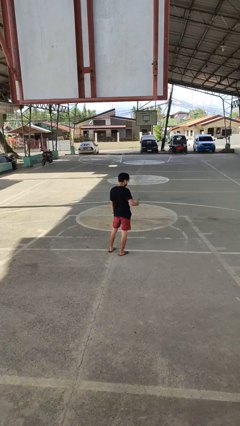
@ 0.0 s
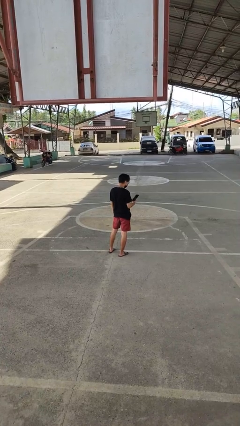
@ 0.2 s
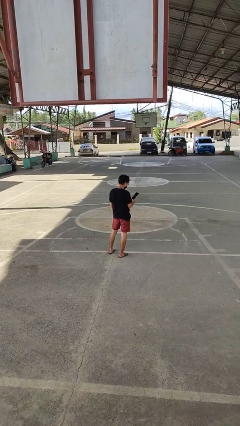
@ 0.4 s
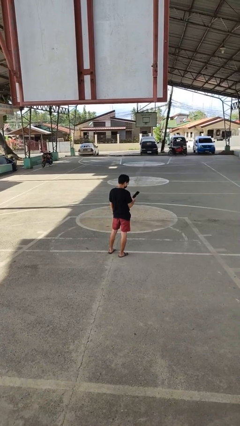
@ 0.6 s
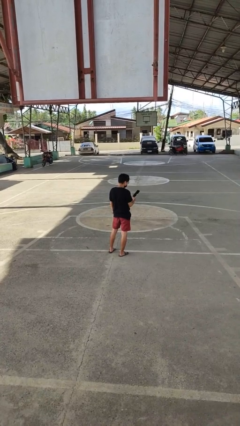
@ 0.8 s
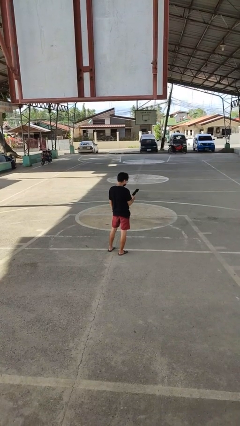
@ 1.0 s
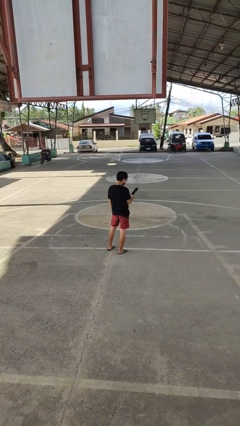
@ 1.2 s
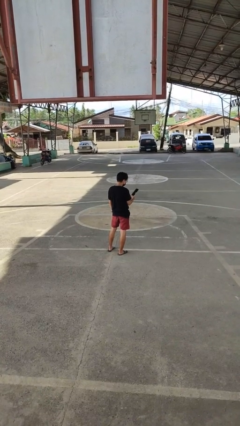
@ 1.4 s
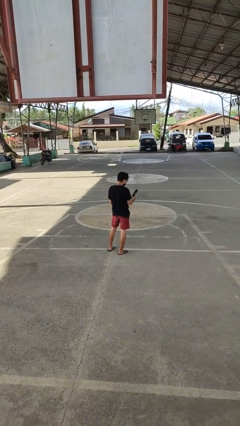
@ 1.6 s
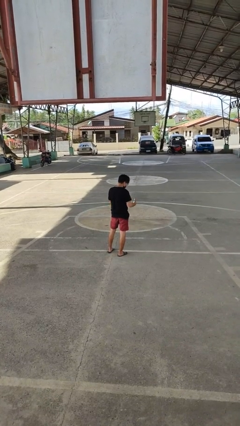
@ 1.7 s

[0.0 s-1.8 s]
person takes phone from pocket

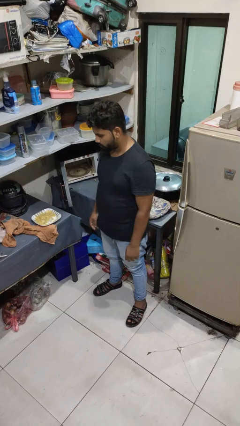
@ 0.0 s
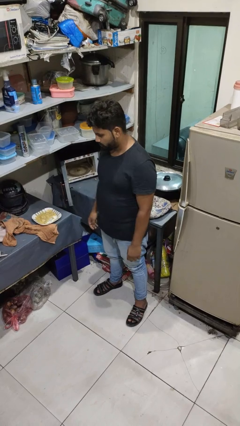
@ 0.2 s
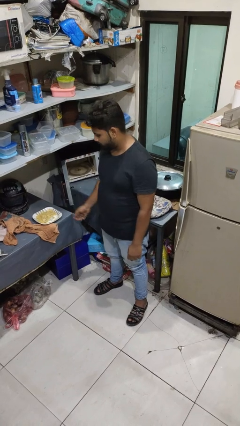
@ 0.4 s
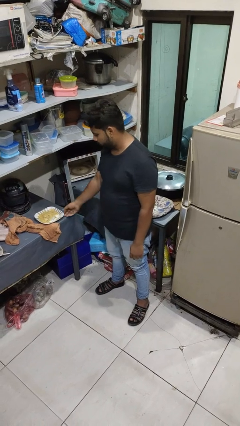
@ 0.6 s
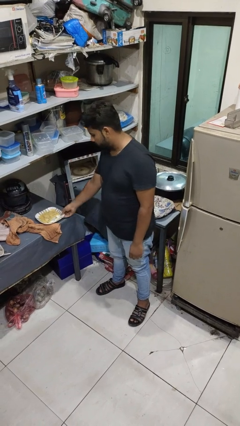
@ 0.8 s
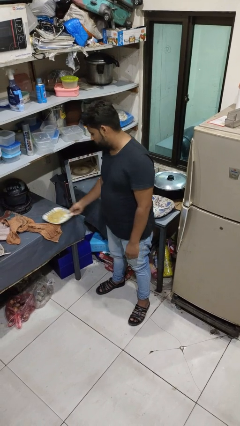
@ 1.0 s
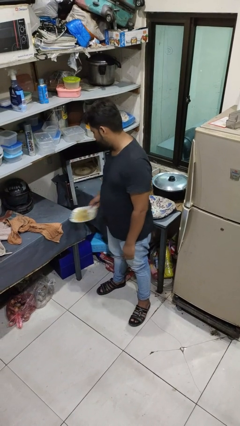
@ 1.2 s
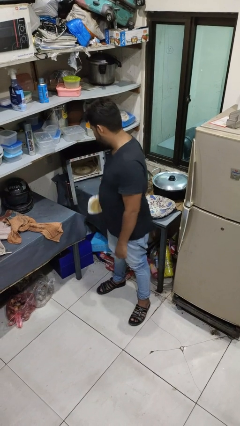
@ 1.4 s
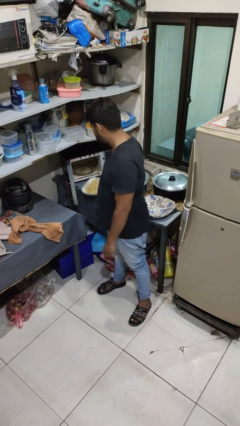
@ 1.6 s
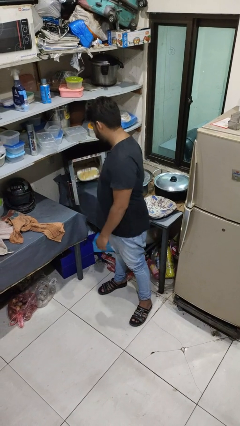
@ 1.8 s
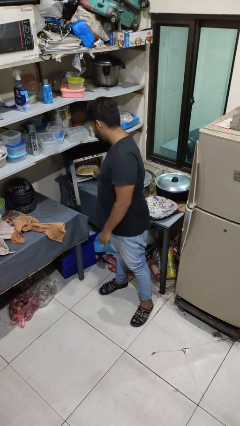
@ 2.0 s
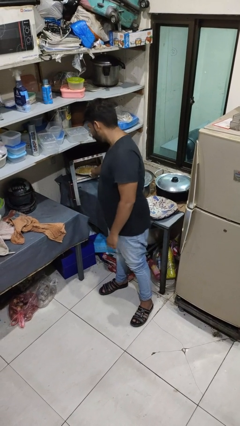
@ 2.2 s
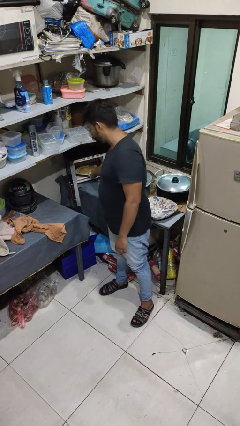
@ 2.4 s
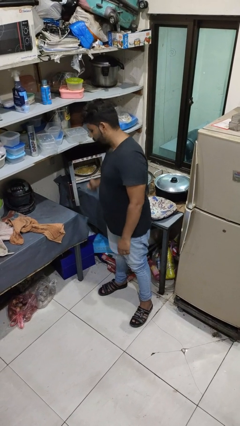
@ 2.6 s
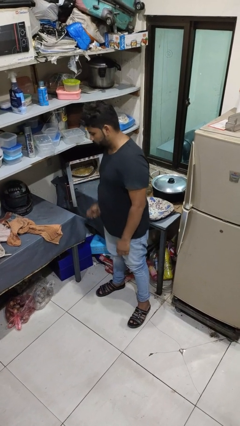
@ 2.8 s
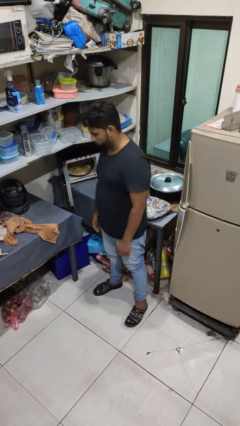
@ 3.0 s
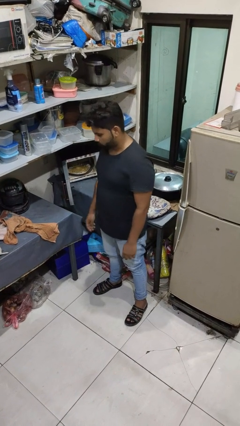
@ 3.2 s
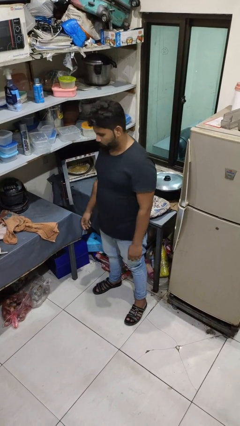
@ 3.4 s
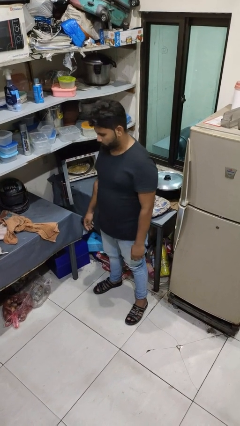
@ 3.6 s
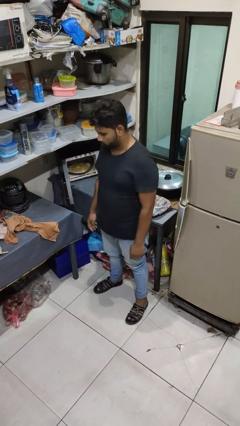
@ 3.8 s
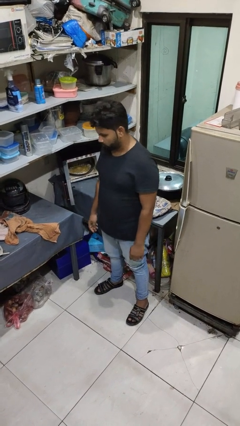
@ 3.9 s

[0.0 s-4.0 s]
person puts object into microwave

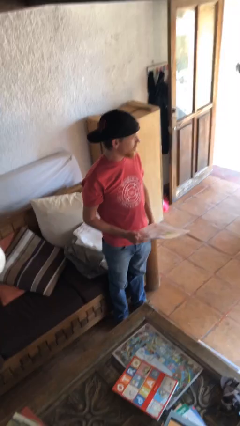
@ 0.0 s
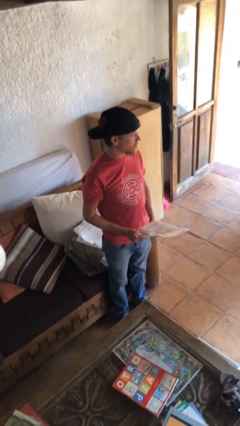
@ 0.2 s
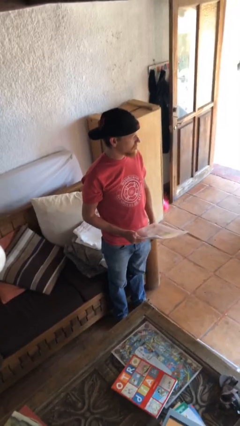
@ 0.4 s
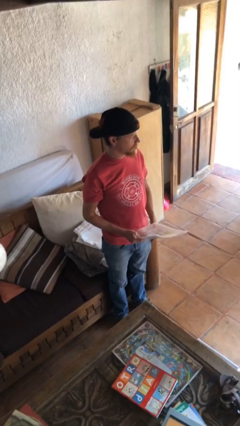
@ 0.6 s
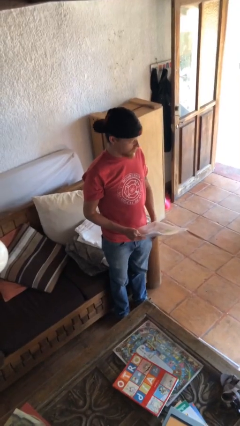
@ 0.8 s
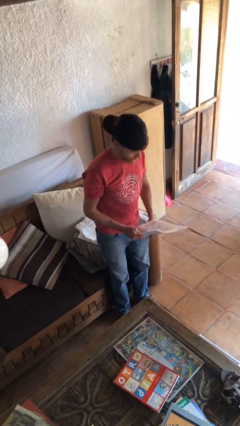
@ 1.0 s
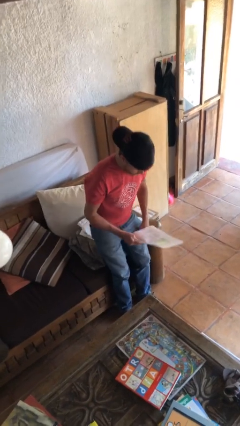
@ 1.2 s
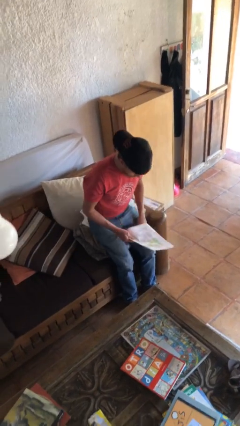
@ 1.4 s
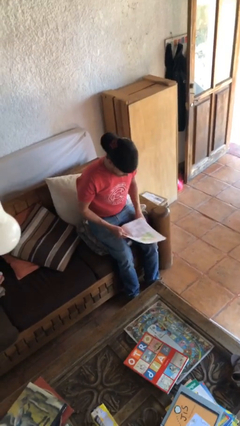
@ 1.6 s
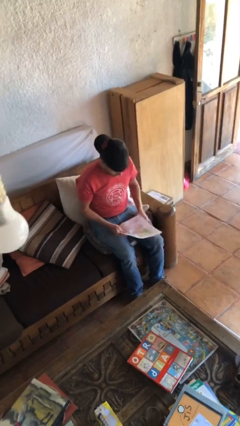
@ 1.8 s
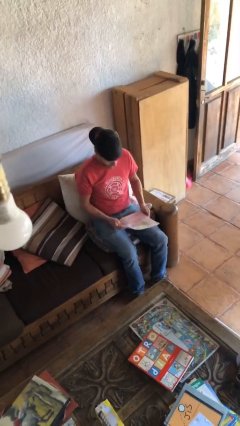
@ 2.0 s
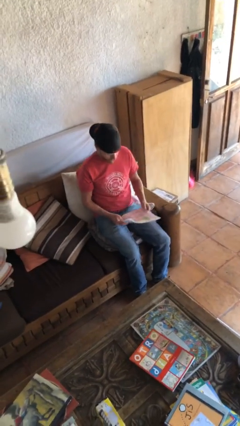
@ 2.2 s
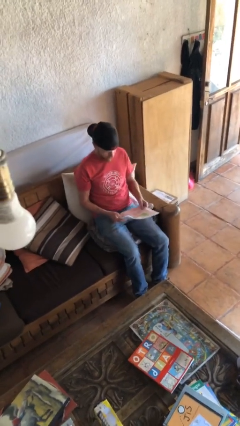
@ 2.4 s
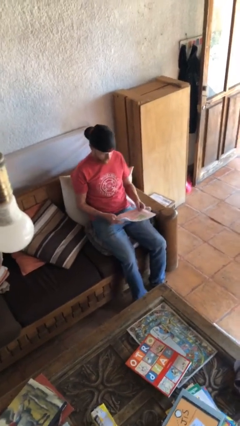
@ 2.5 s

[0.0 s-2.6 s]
person sits down

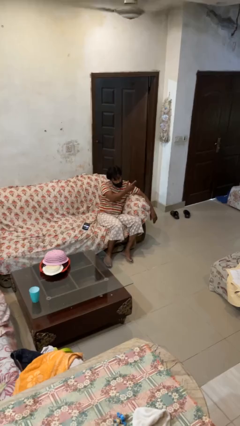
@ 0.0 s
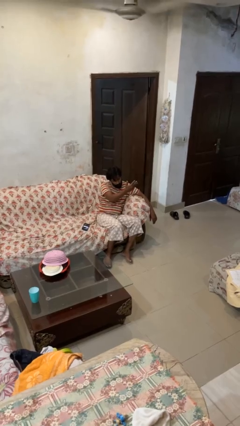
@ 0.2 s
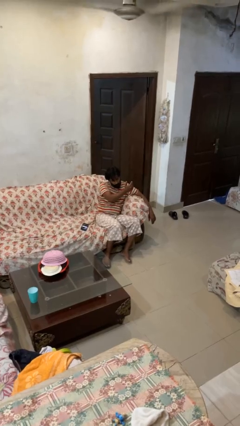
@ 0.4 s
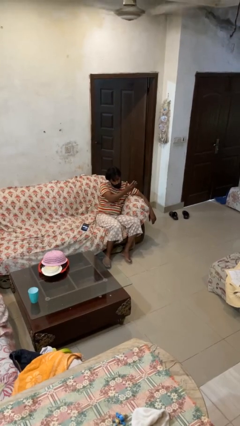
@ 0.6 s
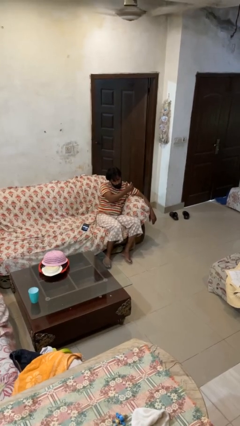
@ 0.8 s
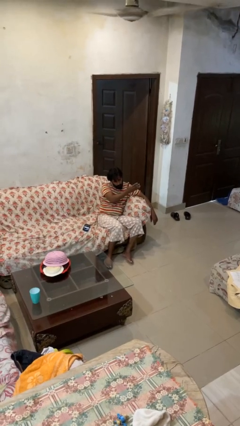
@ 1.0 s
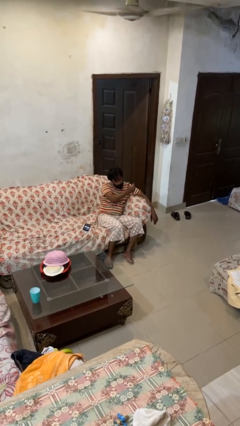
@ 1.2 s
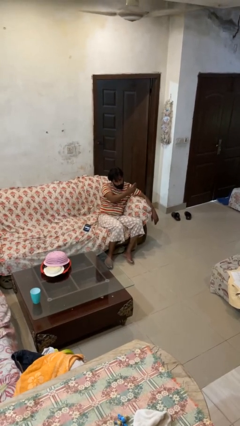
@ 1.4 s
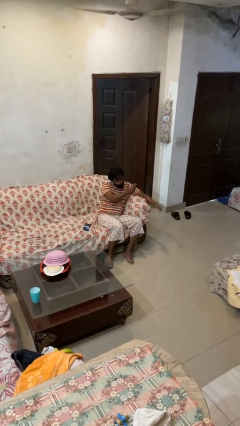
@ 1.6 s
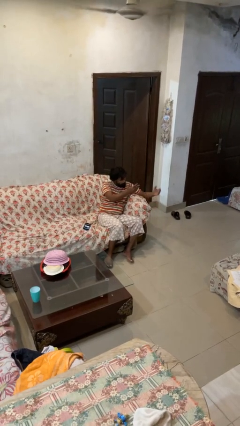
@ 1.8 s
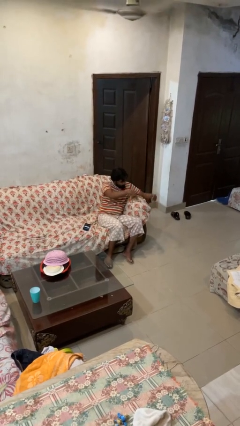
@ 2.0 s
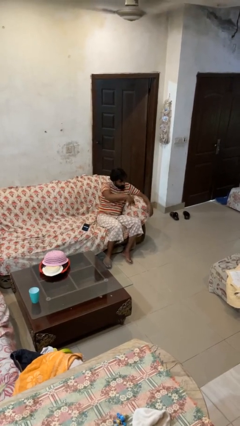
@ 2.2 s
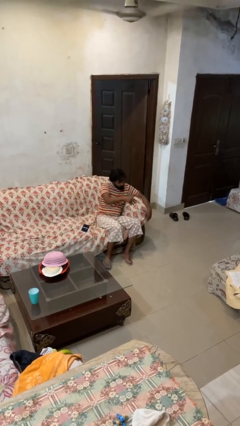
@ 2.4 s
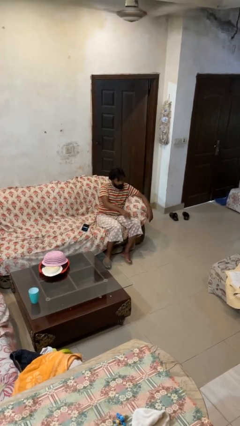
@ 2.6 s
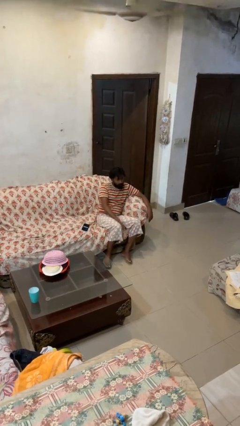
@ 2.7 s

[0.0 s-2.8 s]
person gestures come here

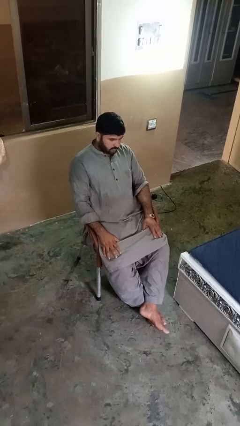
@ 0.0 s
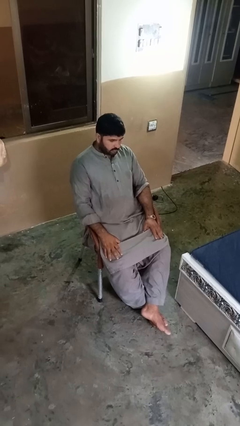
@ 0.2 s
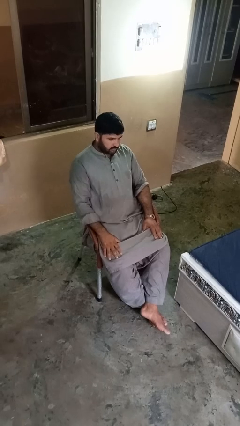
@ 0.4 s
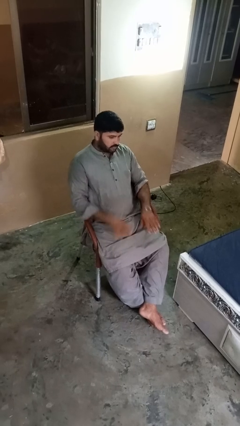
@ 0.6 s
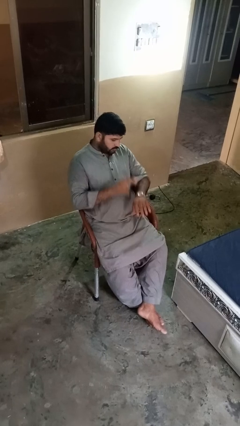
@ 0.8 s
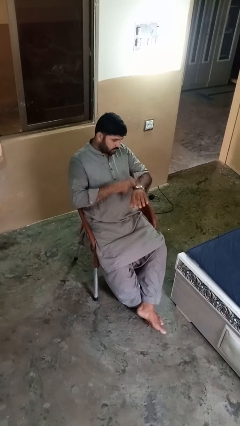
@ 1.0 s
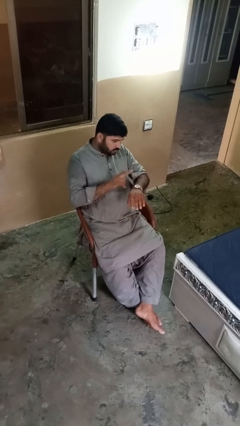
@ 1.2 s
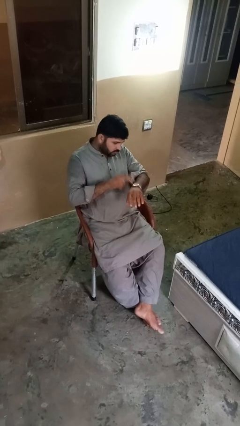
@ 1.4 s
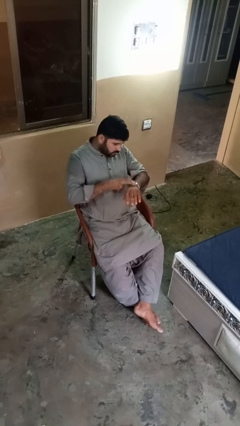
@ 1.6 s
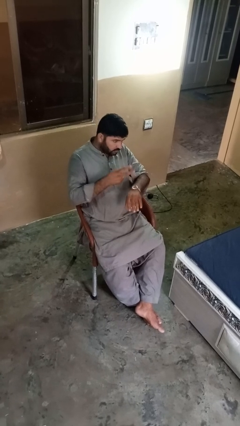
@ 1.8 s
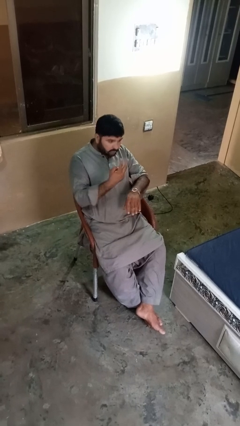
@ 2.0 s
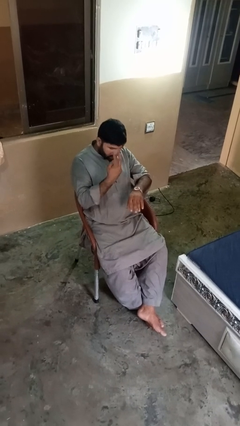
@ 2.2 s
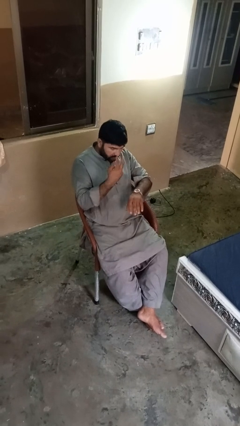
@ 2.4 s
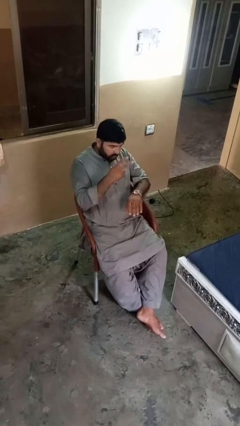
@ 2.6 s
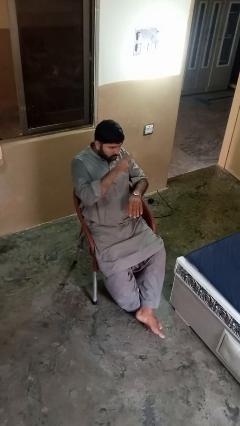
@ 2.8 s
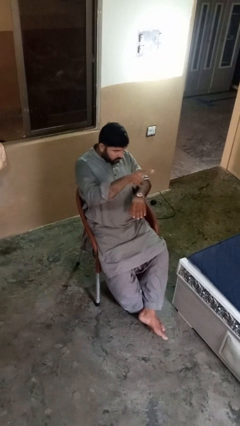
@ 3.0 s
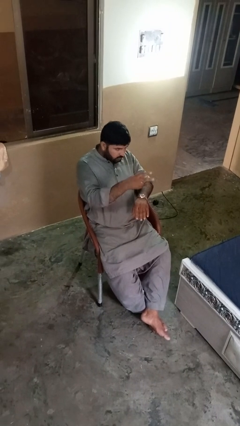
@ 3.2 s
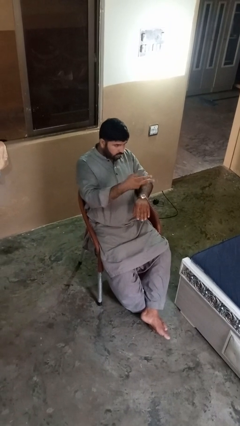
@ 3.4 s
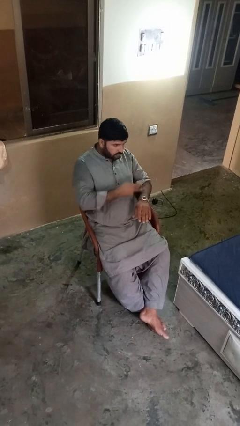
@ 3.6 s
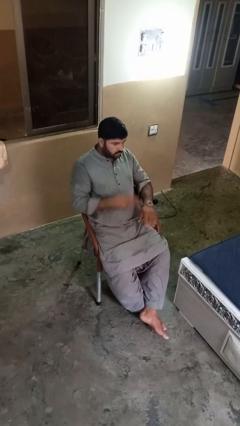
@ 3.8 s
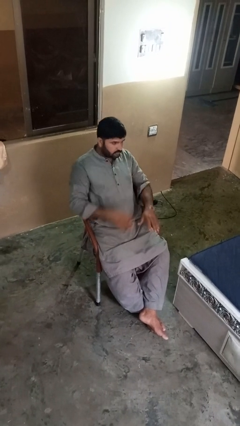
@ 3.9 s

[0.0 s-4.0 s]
person gestures watch closely

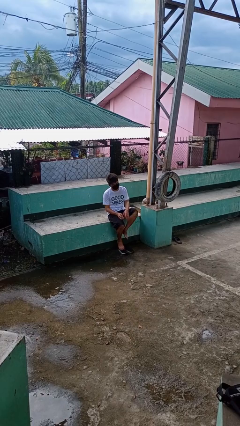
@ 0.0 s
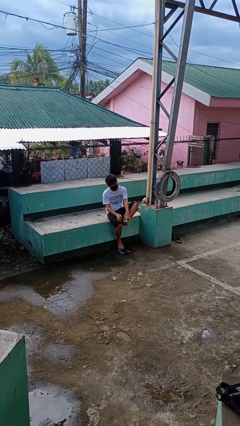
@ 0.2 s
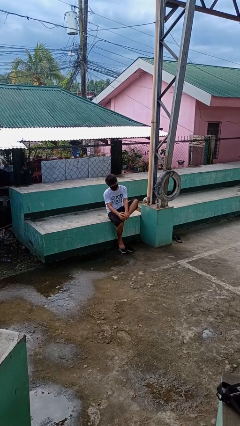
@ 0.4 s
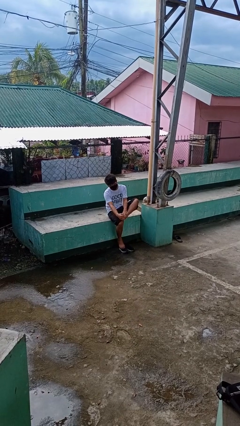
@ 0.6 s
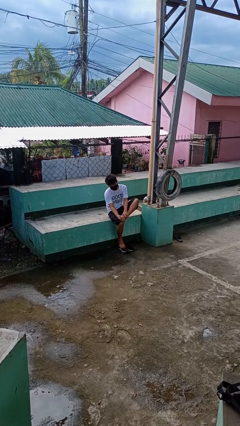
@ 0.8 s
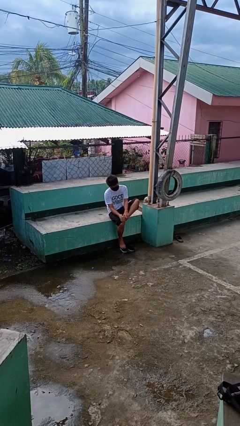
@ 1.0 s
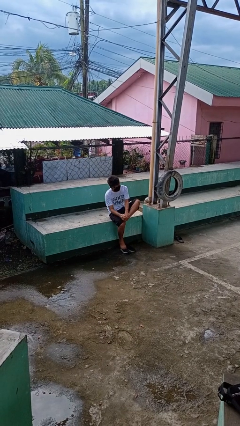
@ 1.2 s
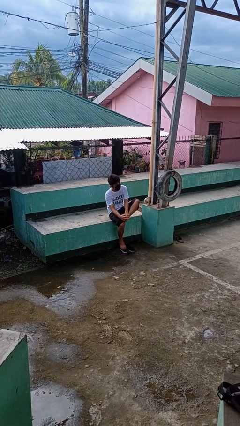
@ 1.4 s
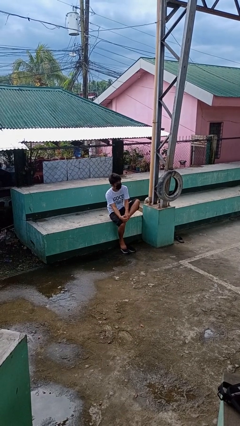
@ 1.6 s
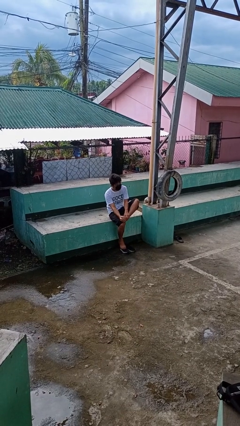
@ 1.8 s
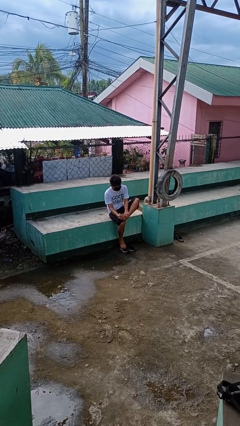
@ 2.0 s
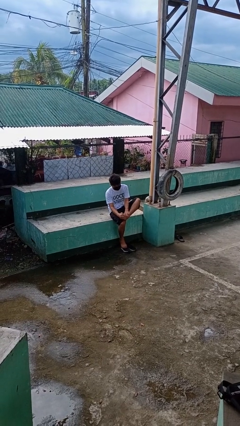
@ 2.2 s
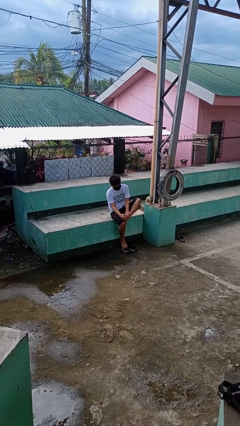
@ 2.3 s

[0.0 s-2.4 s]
person rubs foot
